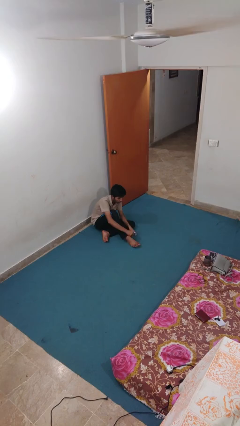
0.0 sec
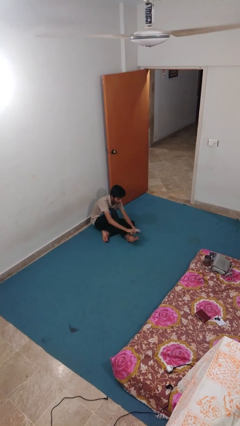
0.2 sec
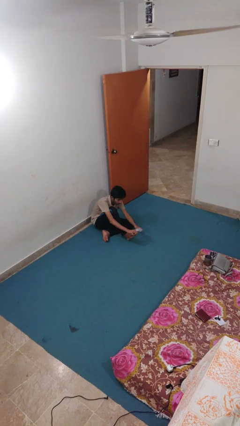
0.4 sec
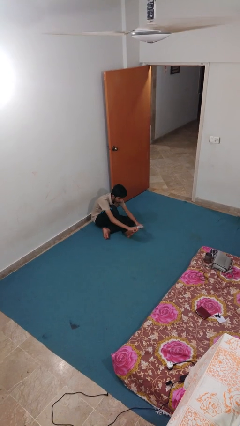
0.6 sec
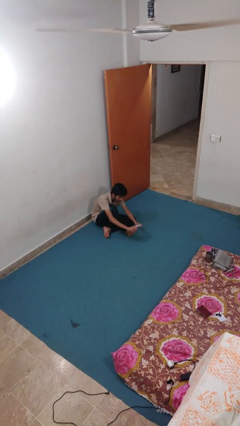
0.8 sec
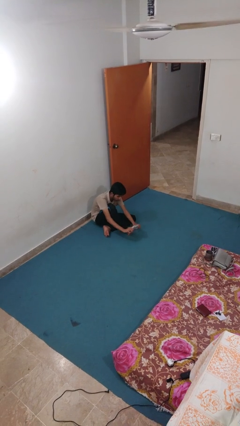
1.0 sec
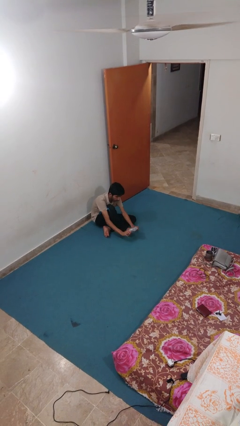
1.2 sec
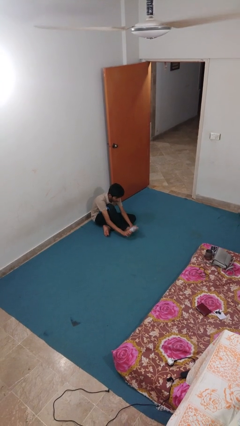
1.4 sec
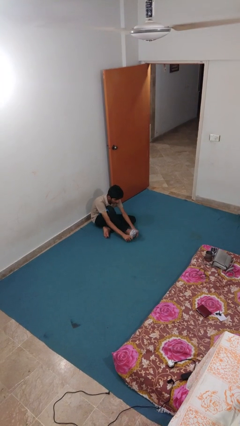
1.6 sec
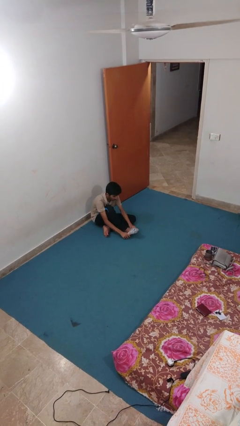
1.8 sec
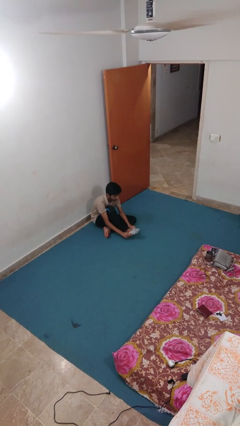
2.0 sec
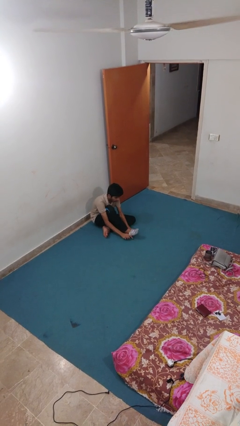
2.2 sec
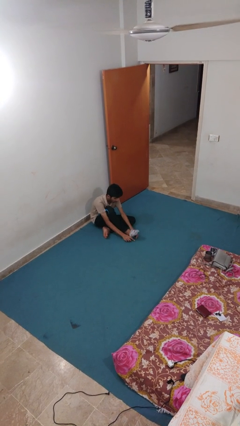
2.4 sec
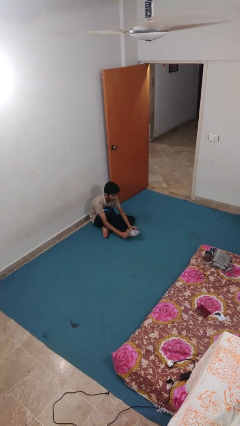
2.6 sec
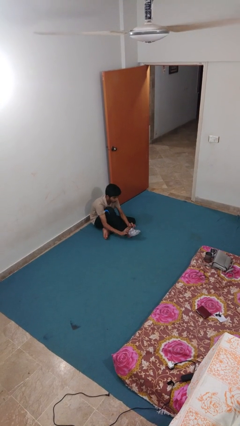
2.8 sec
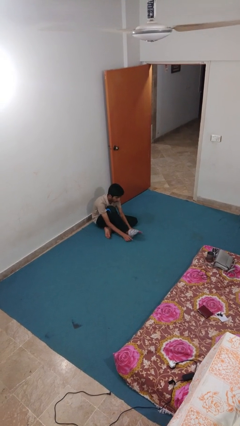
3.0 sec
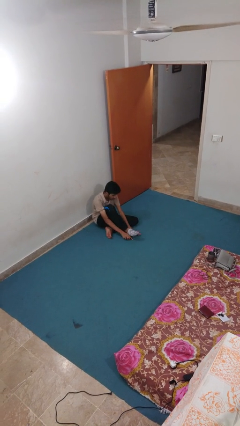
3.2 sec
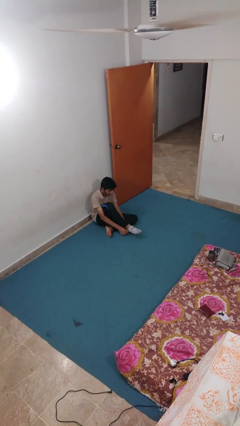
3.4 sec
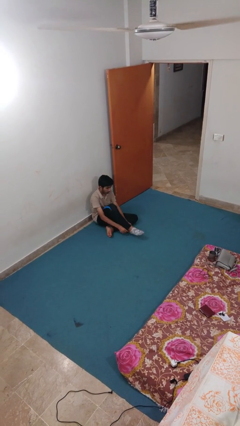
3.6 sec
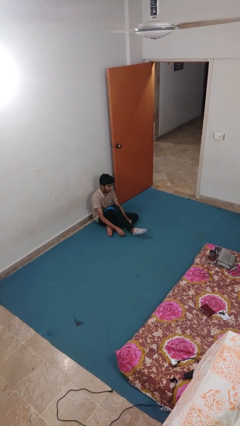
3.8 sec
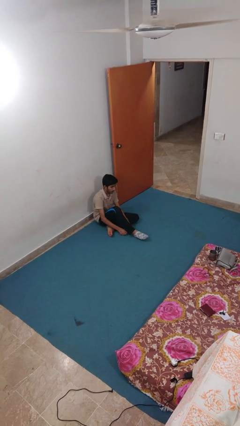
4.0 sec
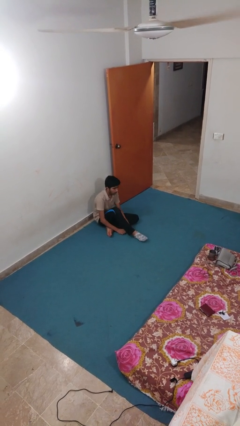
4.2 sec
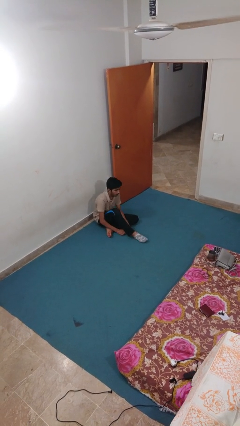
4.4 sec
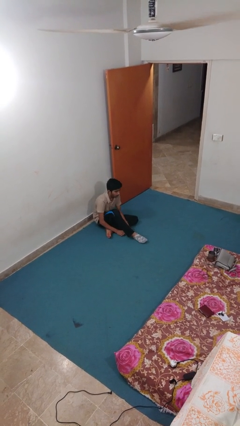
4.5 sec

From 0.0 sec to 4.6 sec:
person puts on socks

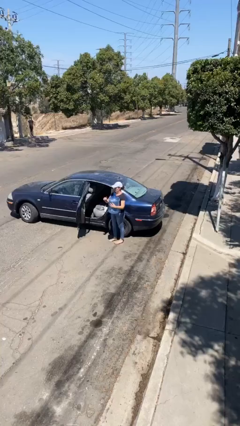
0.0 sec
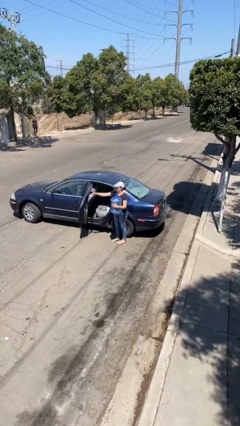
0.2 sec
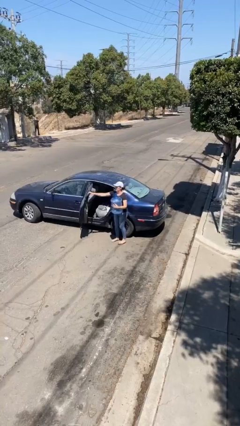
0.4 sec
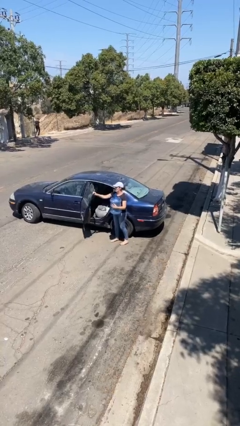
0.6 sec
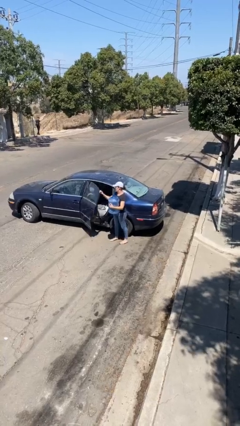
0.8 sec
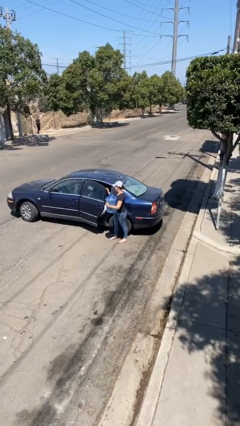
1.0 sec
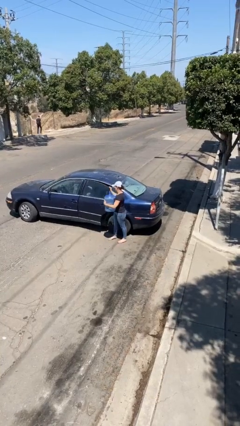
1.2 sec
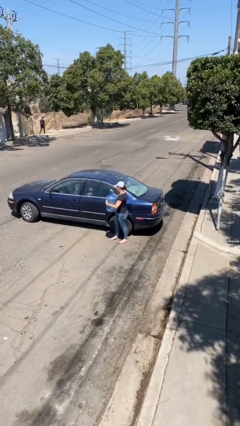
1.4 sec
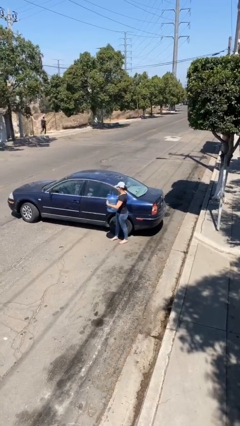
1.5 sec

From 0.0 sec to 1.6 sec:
person closes car door

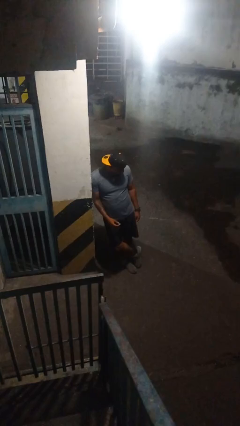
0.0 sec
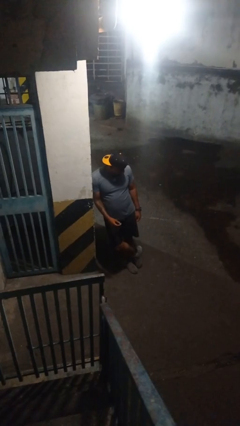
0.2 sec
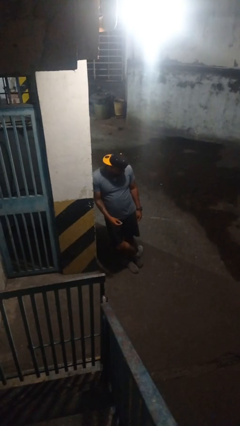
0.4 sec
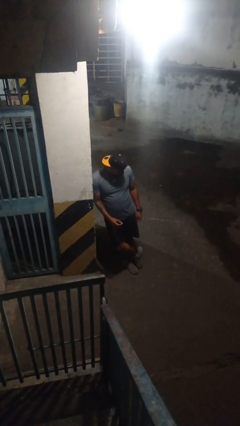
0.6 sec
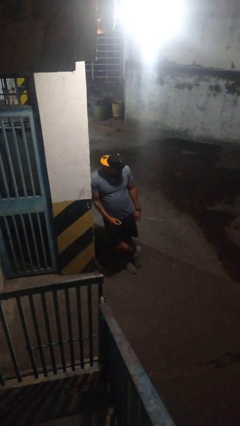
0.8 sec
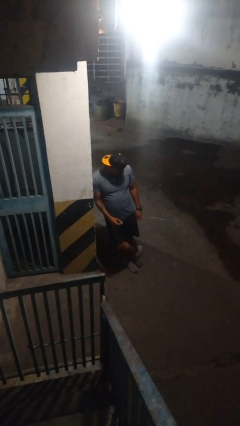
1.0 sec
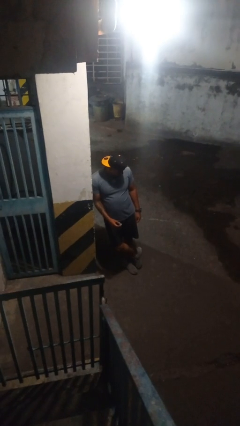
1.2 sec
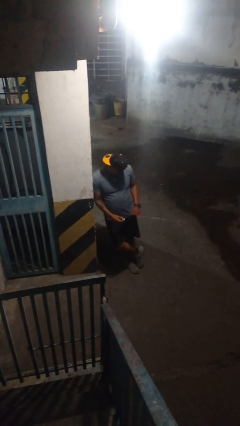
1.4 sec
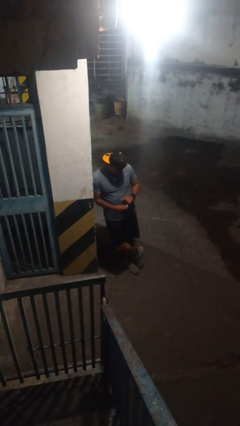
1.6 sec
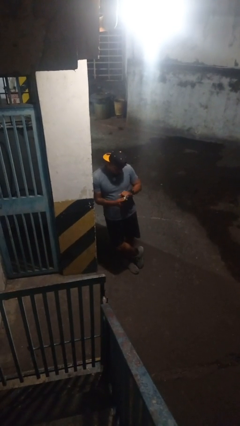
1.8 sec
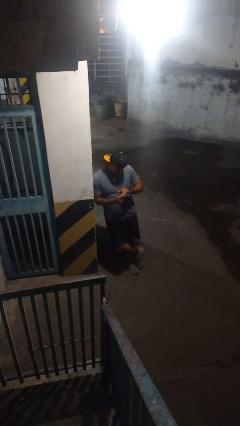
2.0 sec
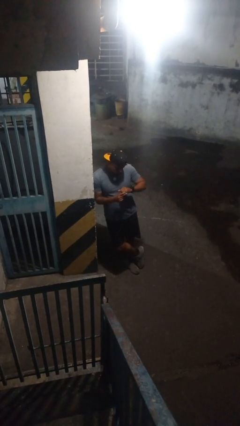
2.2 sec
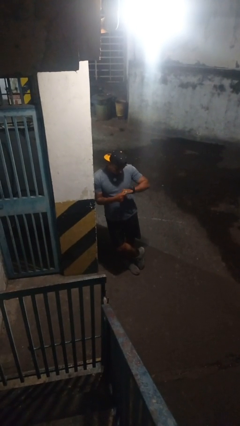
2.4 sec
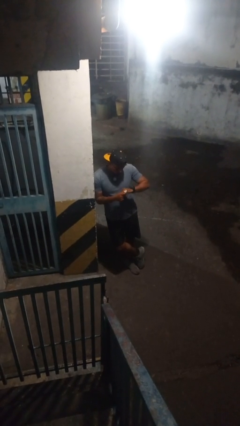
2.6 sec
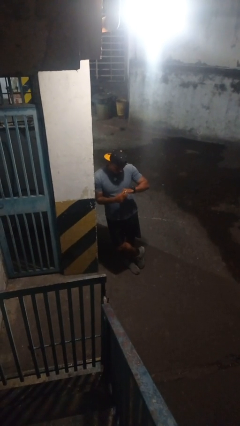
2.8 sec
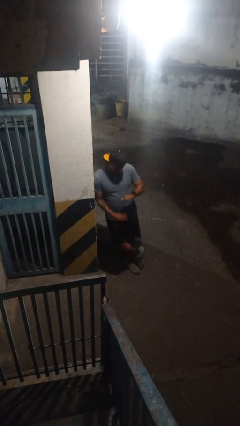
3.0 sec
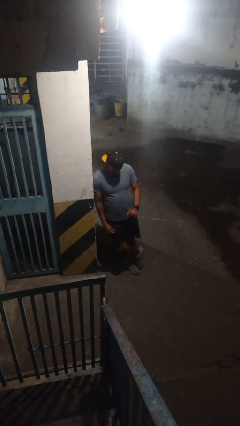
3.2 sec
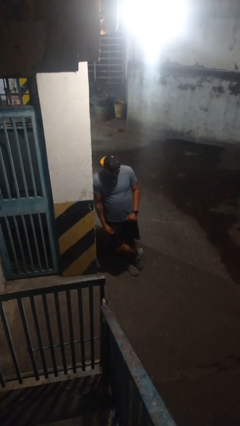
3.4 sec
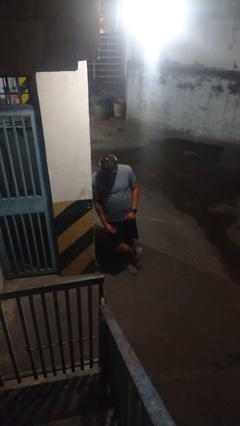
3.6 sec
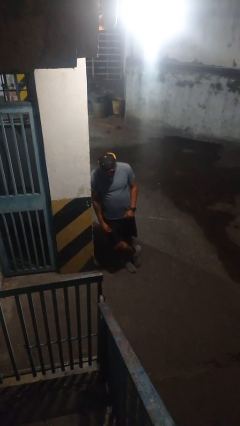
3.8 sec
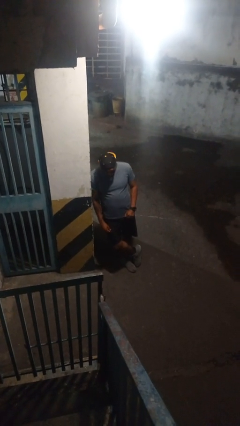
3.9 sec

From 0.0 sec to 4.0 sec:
person puts on ring

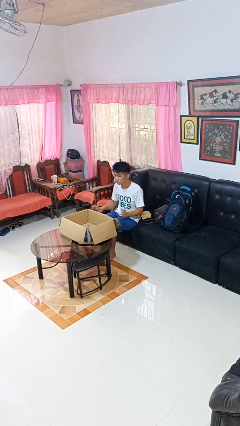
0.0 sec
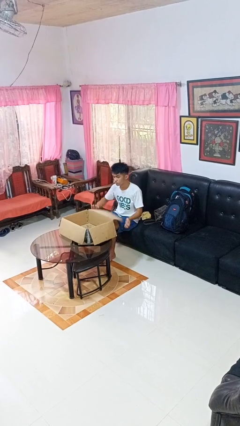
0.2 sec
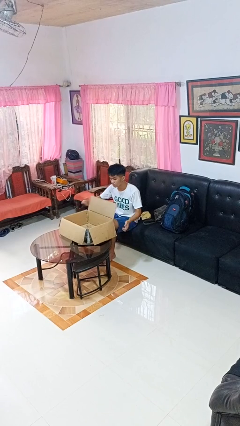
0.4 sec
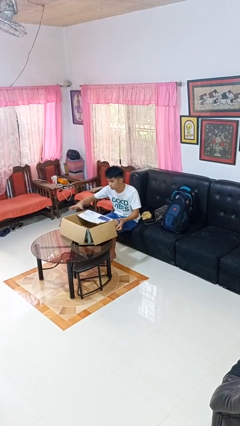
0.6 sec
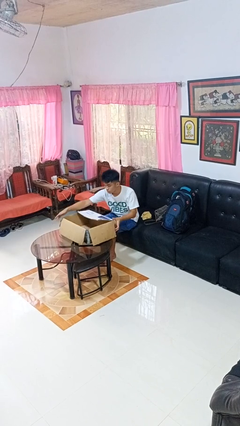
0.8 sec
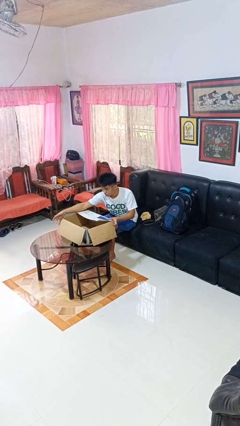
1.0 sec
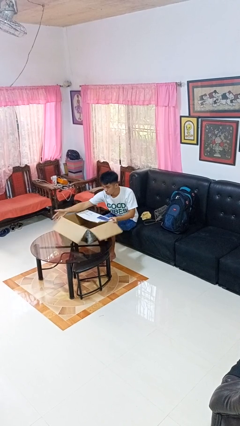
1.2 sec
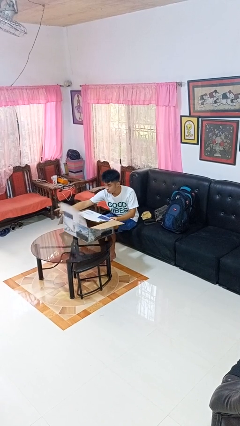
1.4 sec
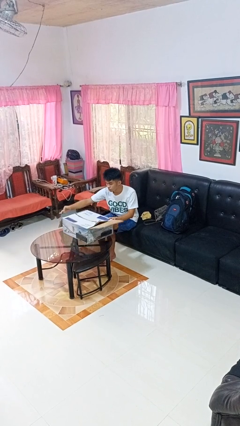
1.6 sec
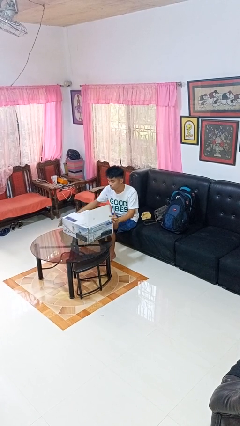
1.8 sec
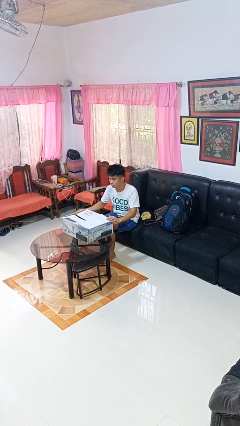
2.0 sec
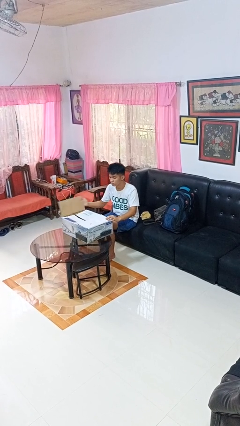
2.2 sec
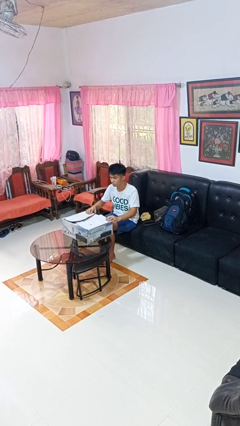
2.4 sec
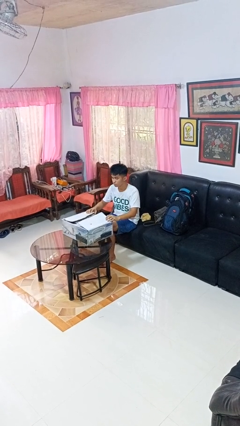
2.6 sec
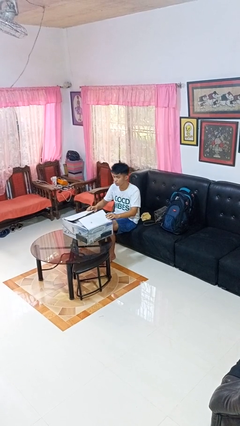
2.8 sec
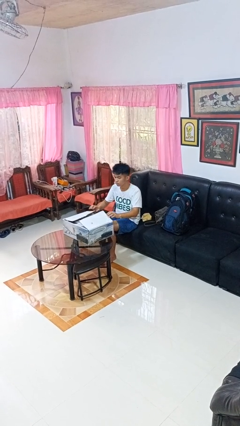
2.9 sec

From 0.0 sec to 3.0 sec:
person closes box

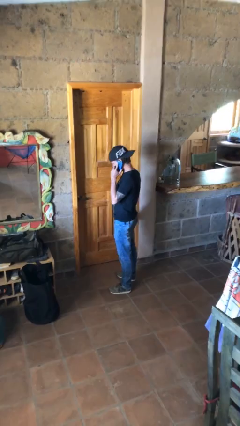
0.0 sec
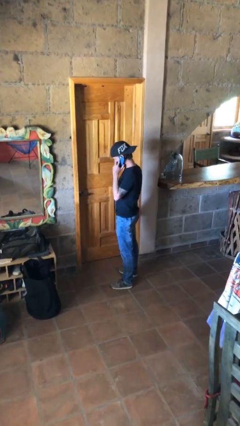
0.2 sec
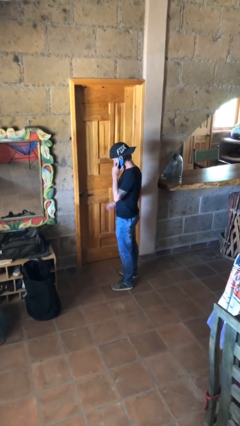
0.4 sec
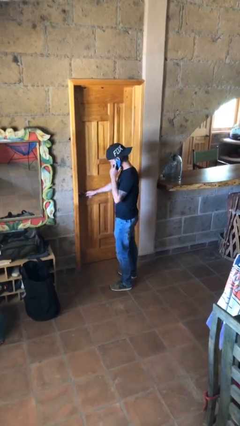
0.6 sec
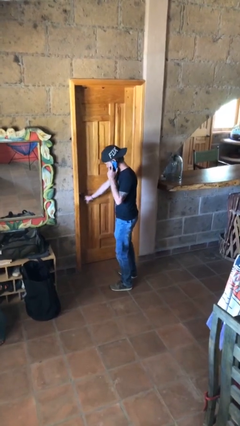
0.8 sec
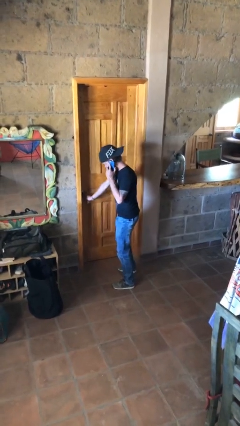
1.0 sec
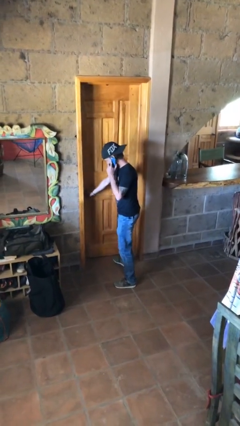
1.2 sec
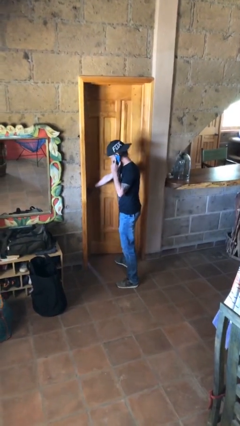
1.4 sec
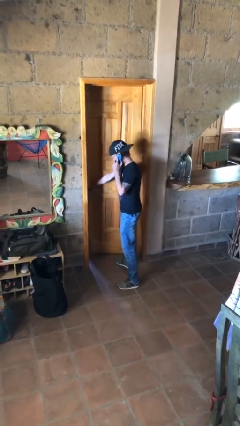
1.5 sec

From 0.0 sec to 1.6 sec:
person opens facility door

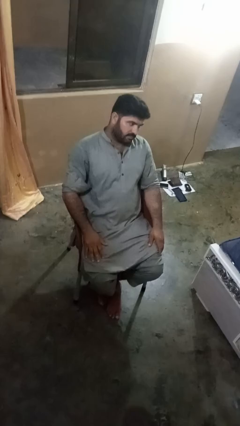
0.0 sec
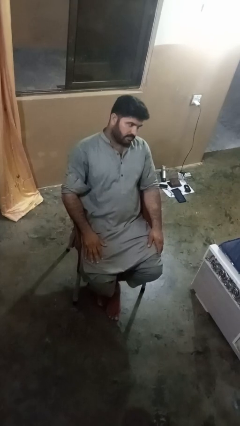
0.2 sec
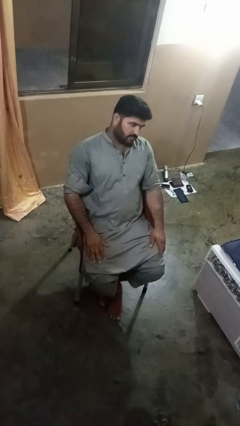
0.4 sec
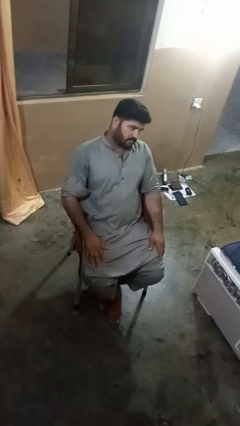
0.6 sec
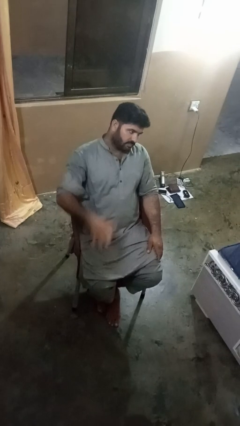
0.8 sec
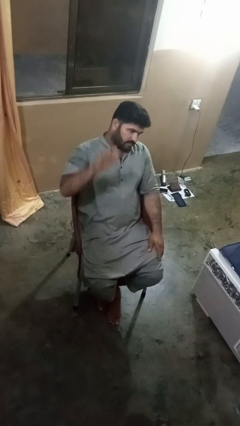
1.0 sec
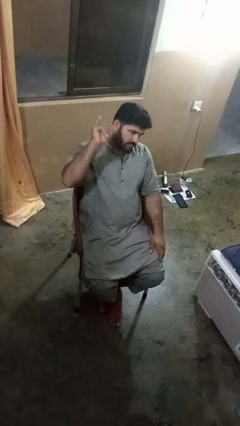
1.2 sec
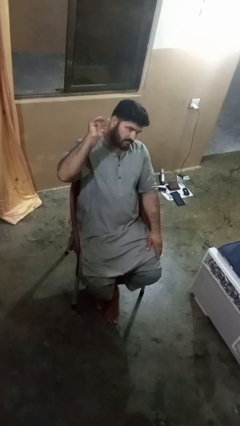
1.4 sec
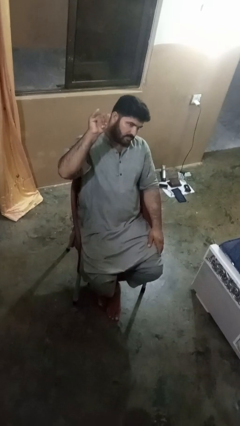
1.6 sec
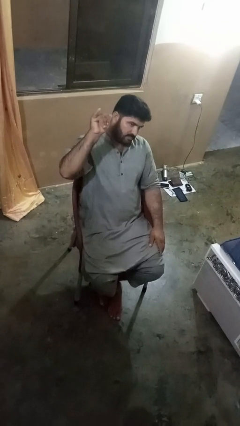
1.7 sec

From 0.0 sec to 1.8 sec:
person gestures hang loose

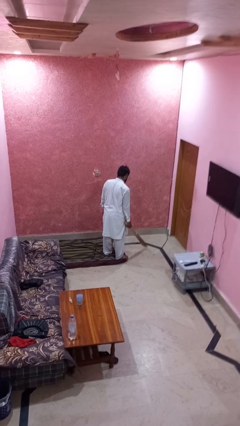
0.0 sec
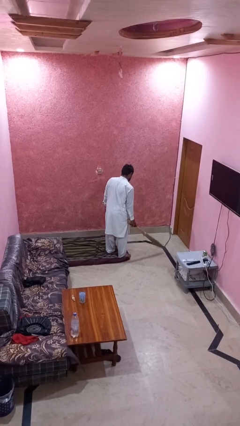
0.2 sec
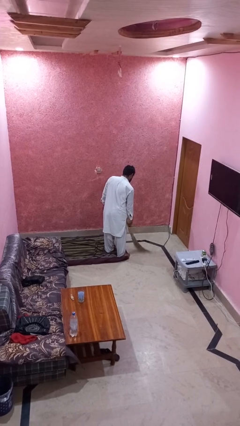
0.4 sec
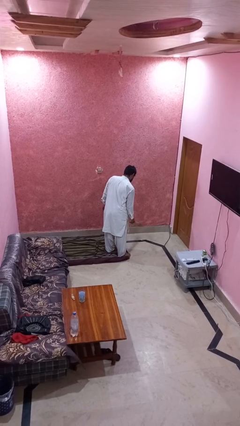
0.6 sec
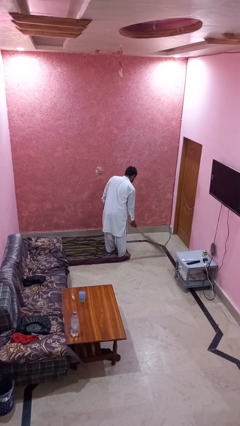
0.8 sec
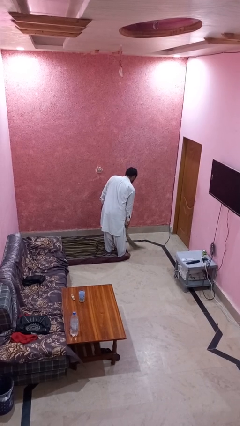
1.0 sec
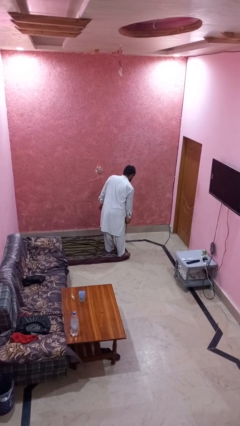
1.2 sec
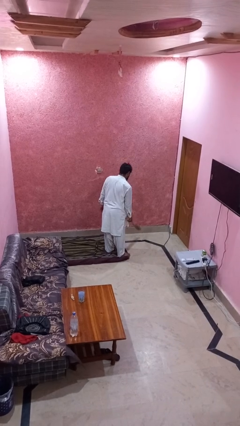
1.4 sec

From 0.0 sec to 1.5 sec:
person sweeps floor
